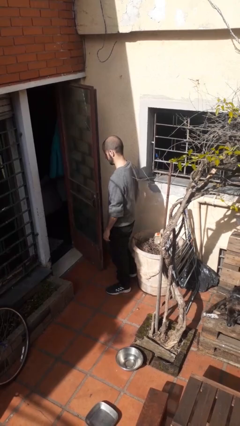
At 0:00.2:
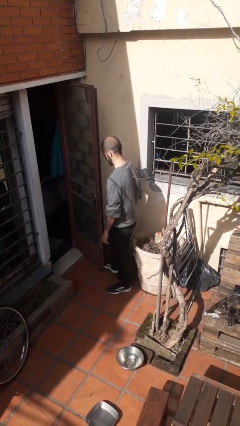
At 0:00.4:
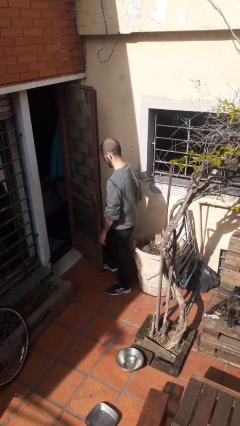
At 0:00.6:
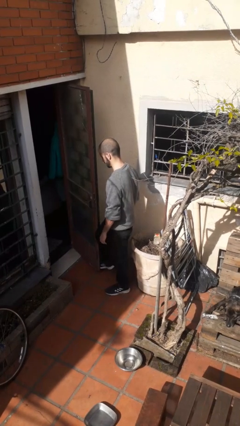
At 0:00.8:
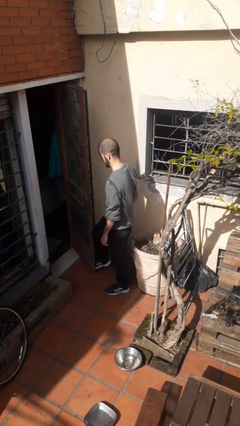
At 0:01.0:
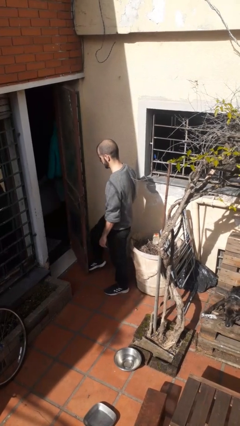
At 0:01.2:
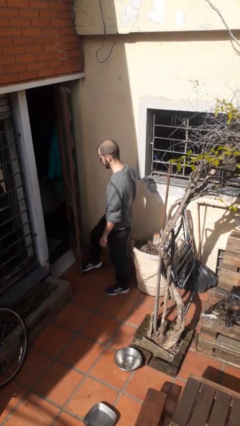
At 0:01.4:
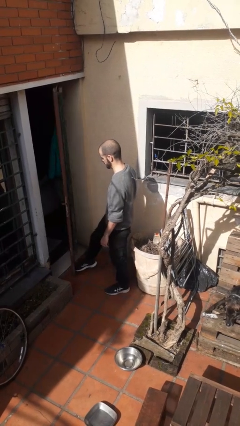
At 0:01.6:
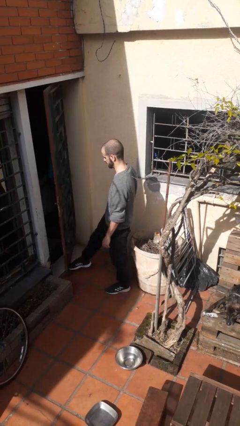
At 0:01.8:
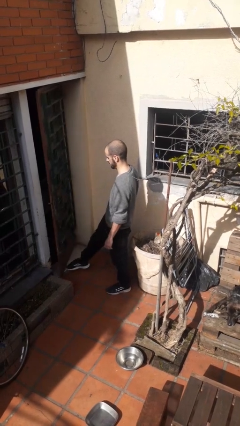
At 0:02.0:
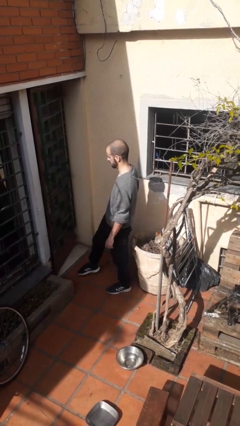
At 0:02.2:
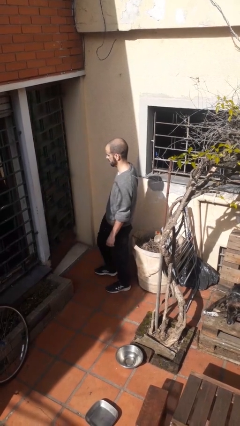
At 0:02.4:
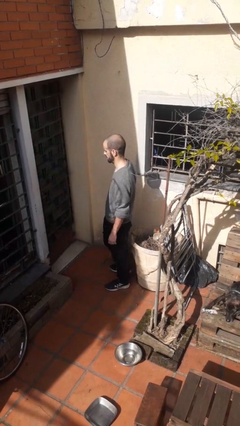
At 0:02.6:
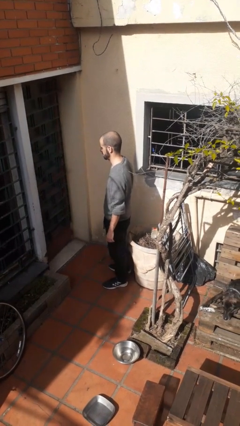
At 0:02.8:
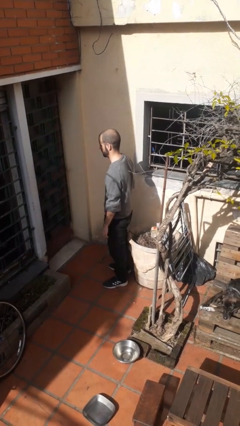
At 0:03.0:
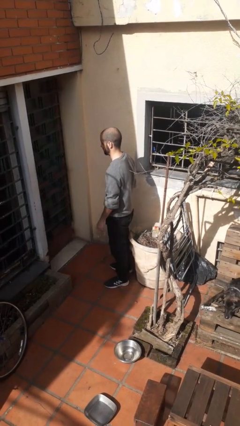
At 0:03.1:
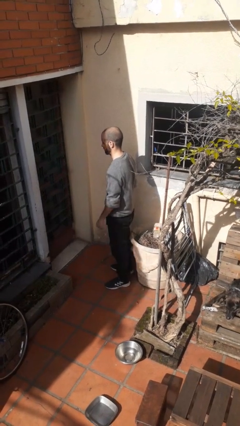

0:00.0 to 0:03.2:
person closes door with foot

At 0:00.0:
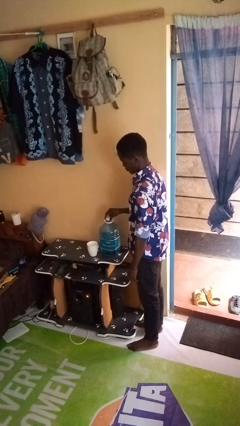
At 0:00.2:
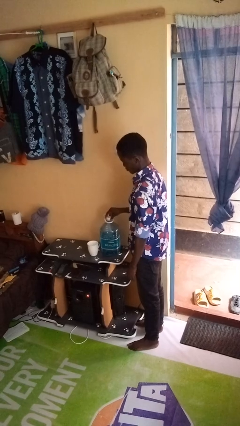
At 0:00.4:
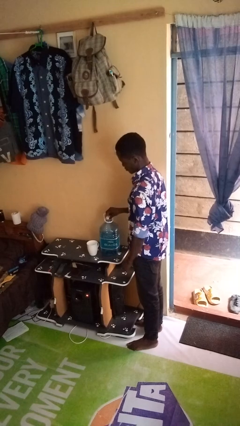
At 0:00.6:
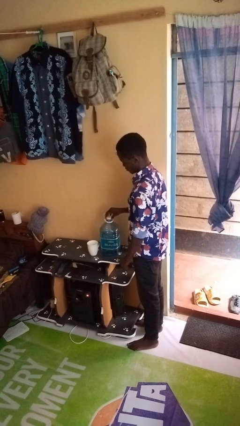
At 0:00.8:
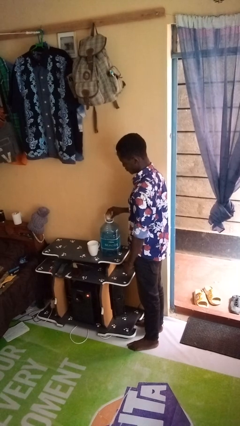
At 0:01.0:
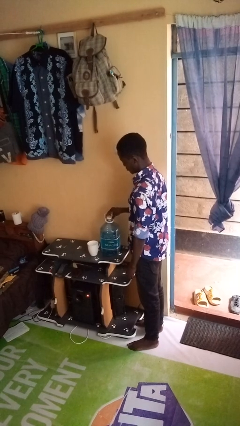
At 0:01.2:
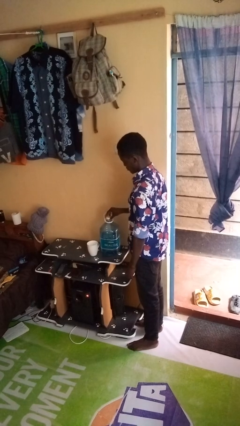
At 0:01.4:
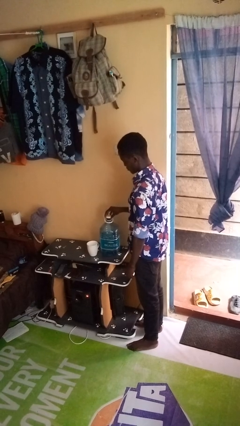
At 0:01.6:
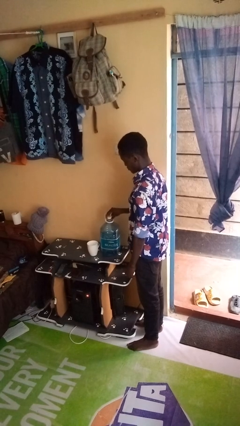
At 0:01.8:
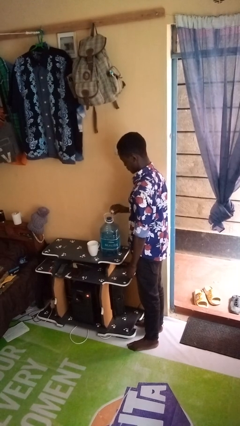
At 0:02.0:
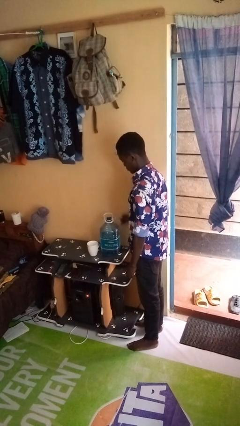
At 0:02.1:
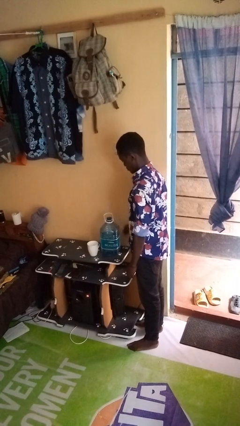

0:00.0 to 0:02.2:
person unscrews lid from bottle

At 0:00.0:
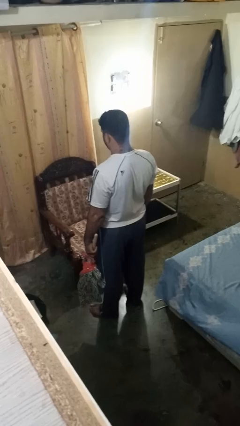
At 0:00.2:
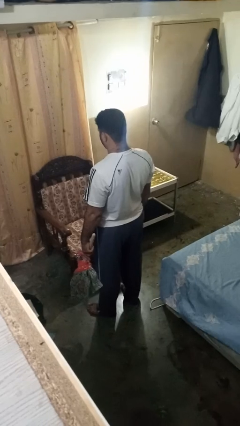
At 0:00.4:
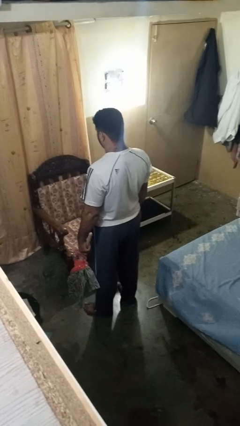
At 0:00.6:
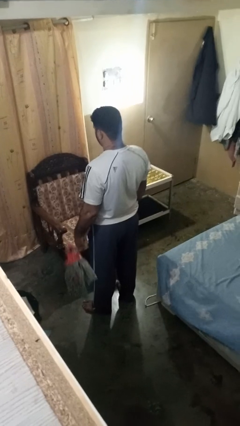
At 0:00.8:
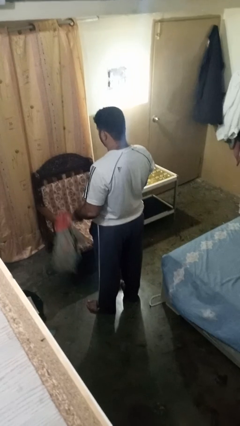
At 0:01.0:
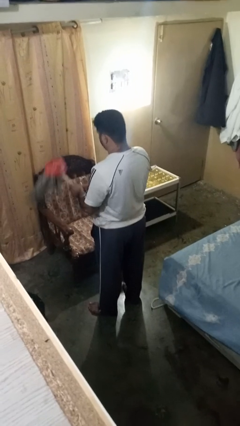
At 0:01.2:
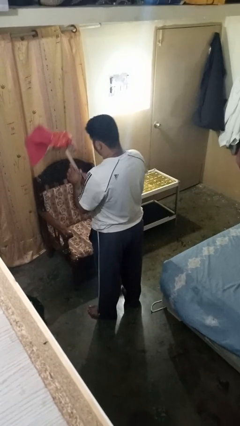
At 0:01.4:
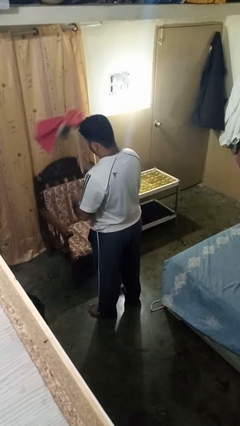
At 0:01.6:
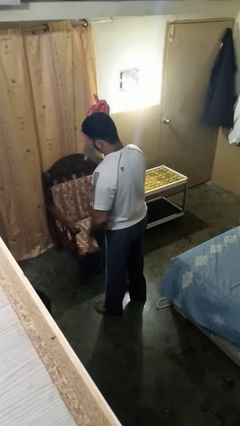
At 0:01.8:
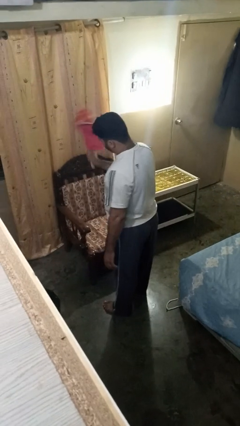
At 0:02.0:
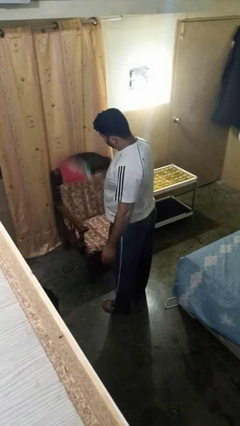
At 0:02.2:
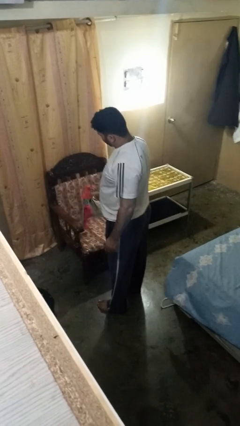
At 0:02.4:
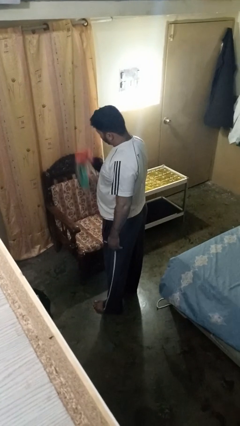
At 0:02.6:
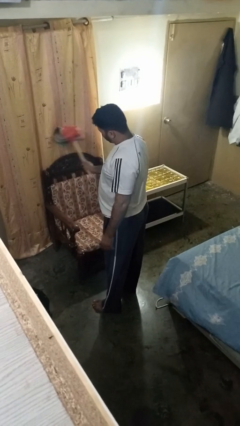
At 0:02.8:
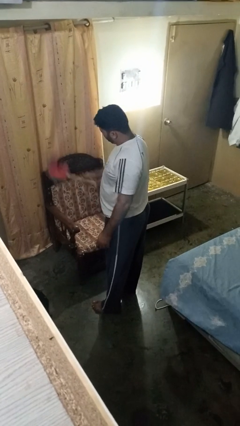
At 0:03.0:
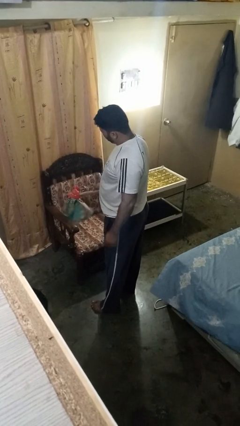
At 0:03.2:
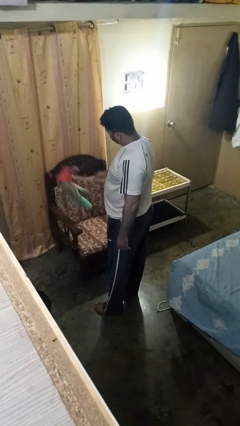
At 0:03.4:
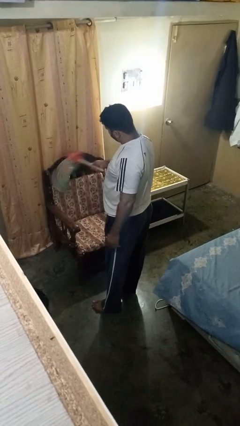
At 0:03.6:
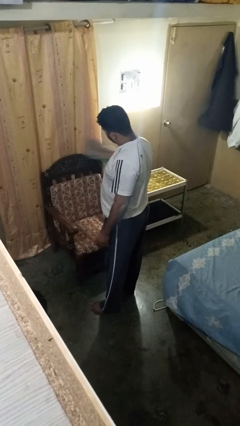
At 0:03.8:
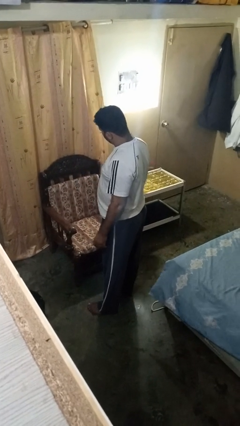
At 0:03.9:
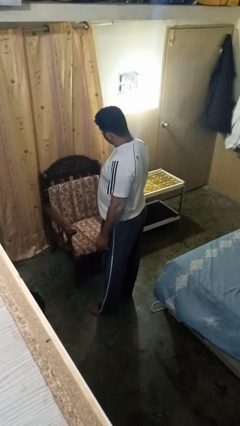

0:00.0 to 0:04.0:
person dusts furniture

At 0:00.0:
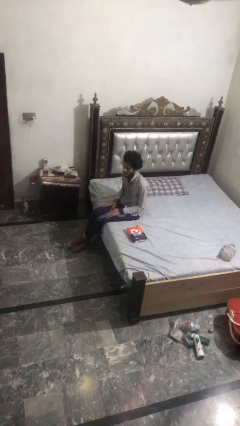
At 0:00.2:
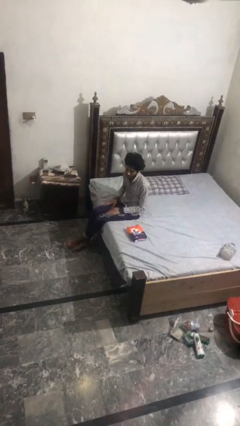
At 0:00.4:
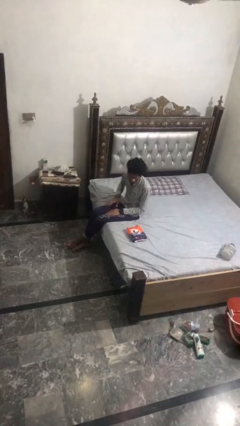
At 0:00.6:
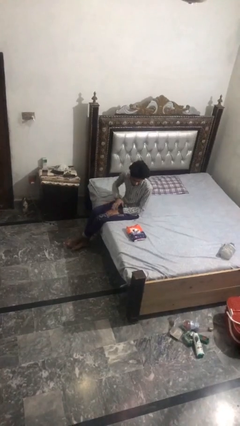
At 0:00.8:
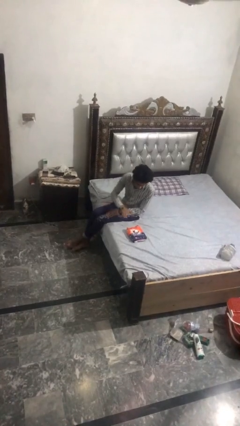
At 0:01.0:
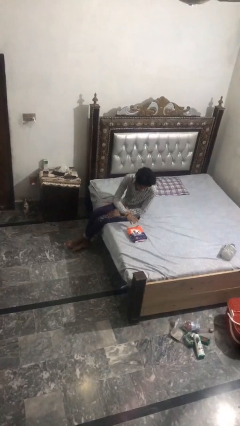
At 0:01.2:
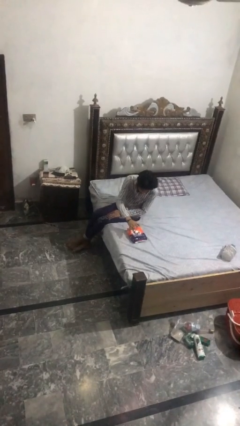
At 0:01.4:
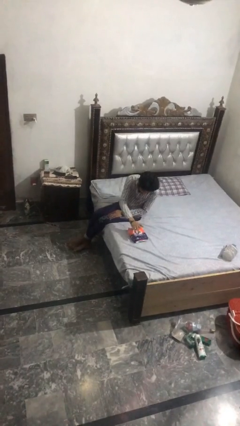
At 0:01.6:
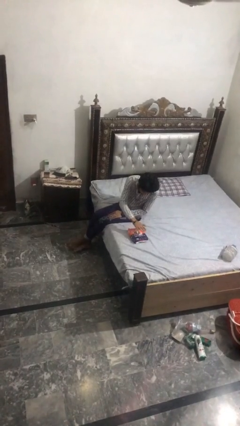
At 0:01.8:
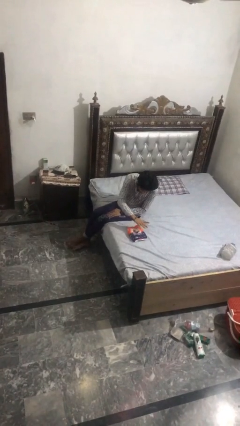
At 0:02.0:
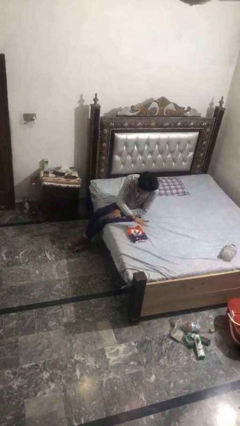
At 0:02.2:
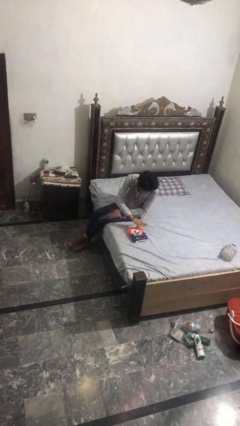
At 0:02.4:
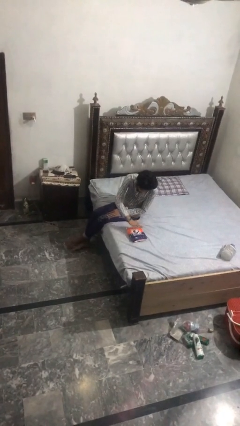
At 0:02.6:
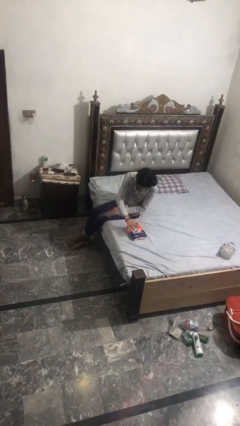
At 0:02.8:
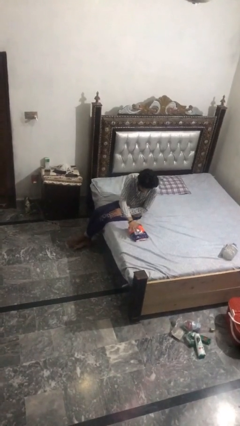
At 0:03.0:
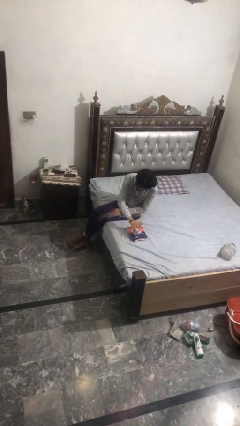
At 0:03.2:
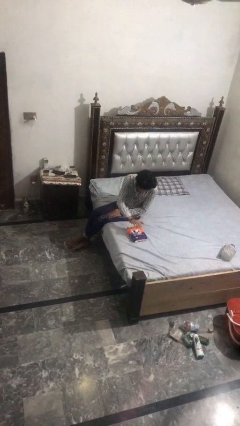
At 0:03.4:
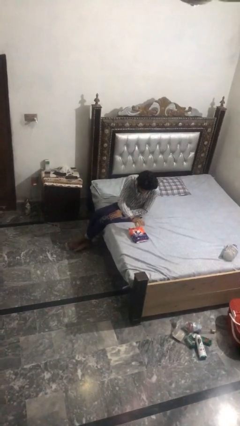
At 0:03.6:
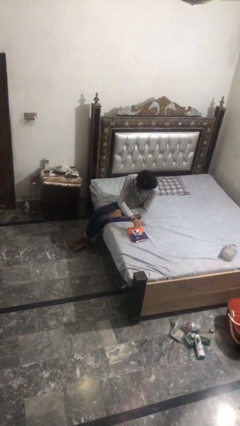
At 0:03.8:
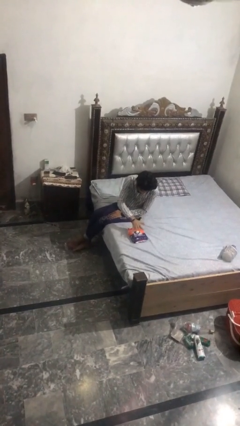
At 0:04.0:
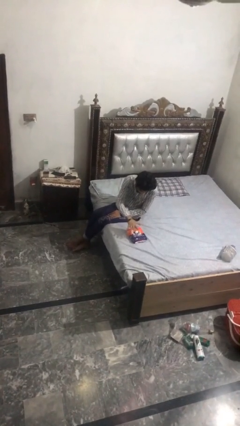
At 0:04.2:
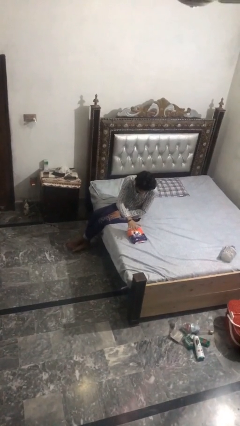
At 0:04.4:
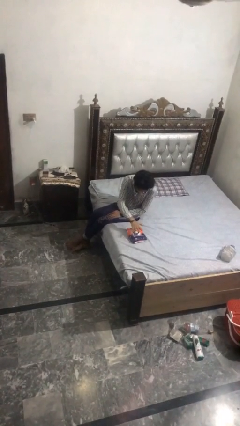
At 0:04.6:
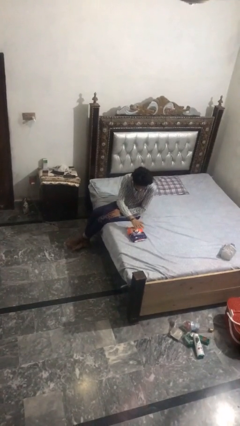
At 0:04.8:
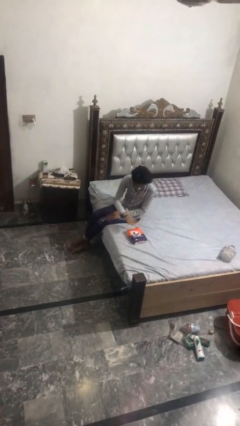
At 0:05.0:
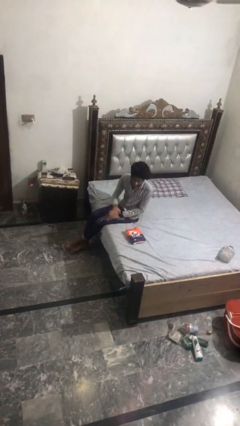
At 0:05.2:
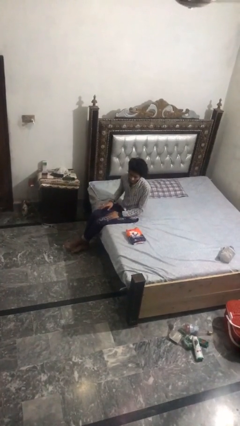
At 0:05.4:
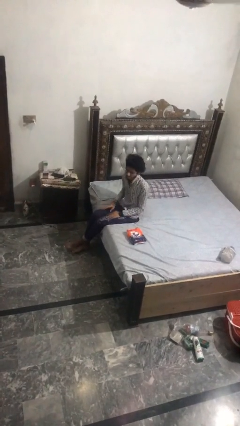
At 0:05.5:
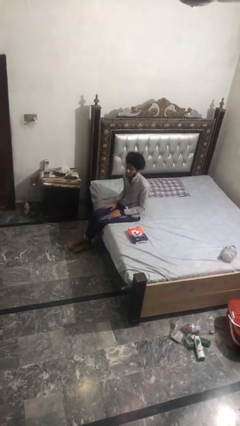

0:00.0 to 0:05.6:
person waves hand over object

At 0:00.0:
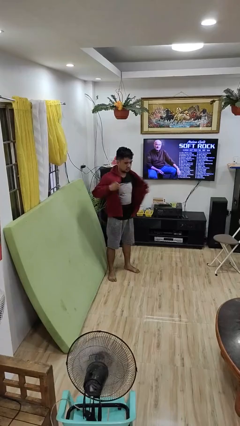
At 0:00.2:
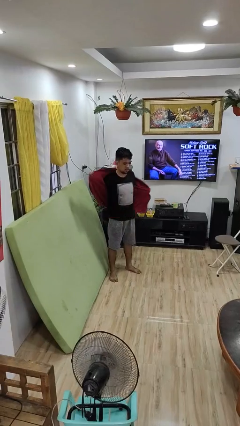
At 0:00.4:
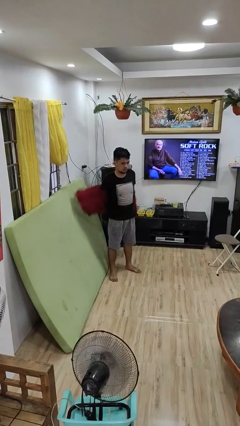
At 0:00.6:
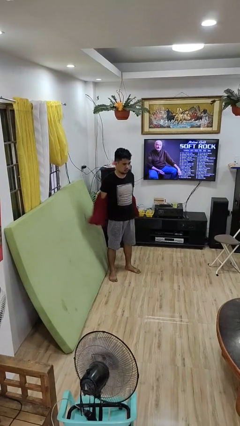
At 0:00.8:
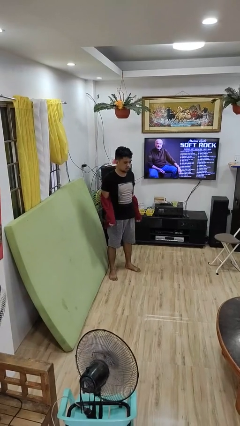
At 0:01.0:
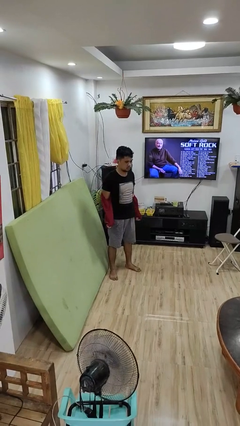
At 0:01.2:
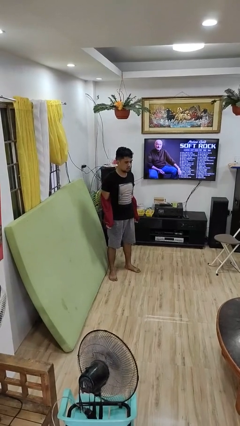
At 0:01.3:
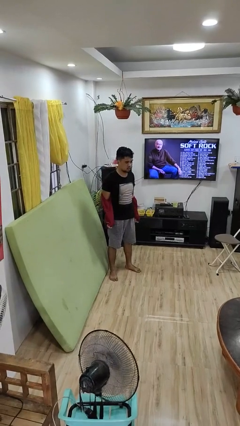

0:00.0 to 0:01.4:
person takes off jacket

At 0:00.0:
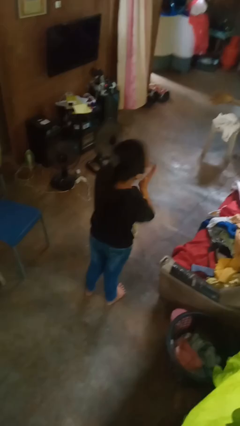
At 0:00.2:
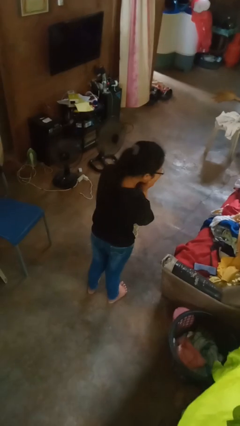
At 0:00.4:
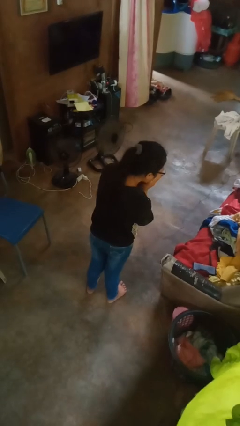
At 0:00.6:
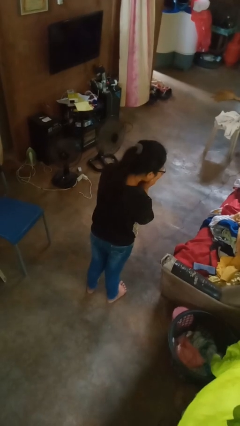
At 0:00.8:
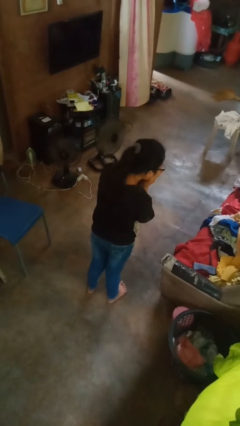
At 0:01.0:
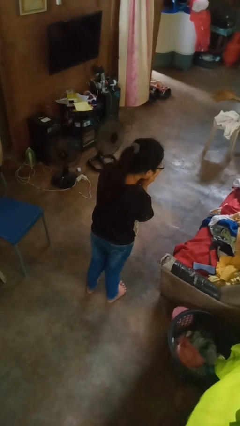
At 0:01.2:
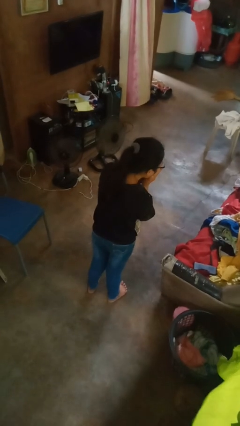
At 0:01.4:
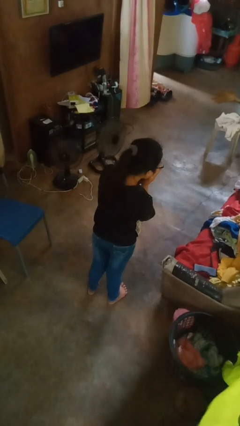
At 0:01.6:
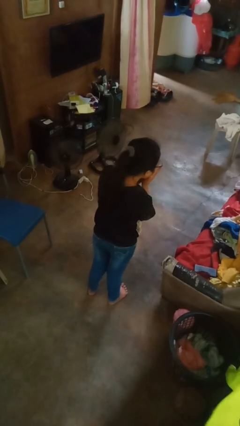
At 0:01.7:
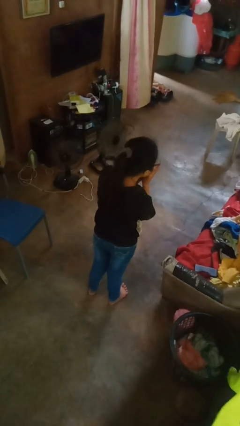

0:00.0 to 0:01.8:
person sneezes into hand
